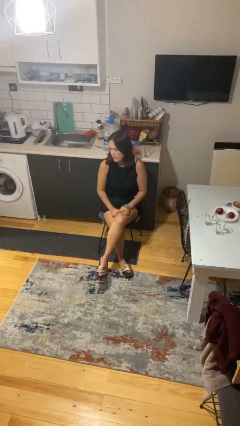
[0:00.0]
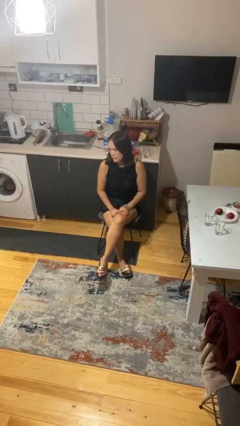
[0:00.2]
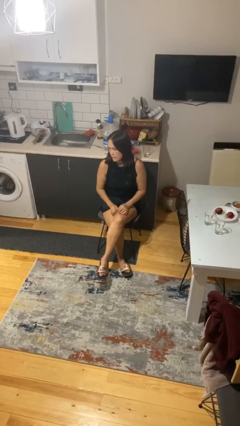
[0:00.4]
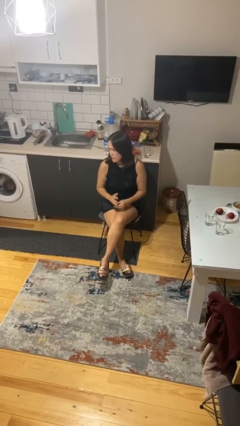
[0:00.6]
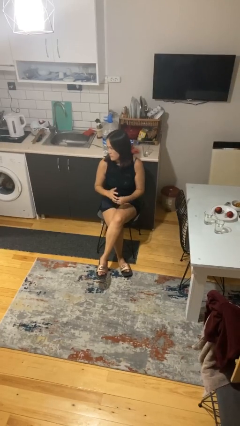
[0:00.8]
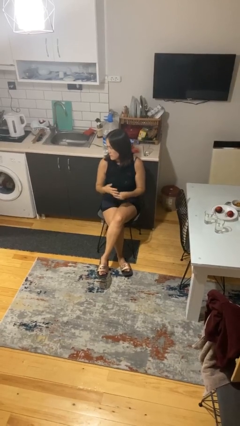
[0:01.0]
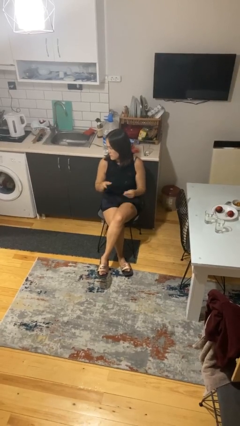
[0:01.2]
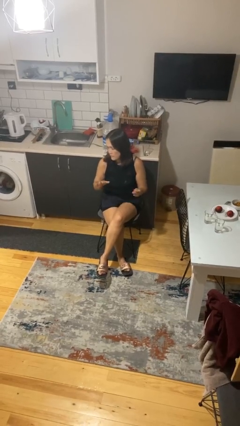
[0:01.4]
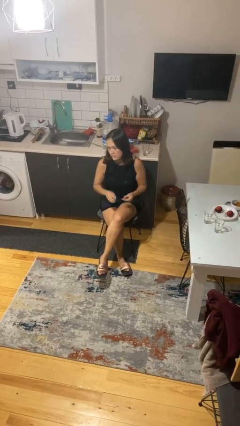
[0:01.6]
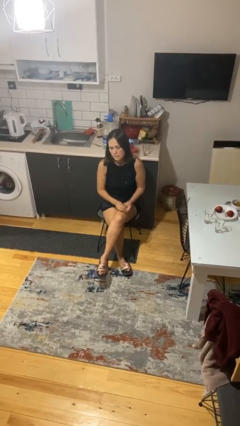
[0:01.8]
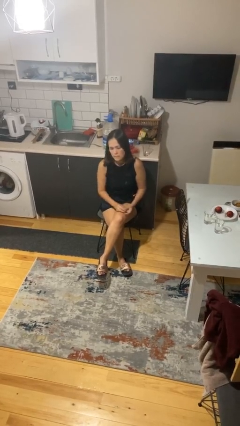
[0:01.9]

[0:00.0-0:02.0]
person takes off ring

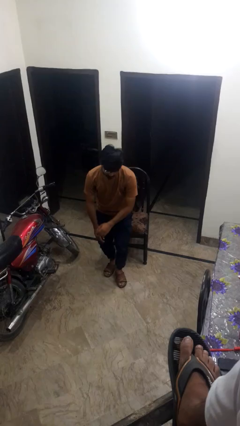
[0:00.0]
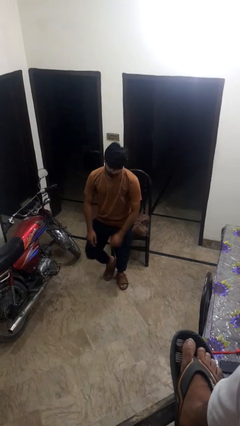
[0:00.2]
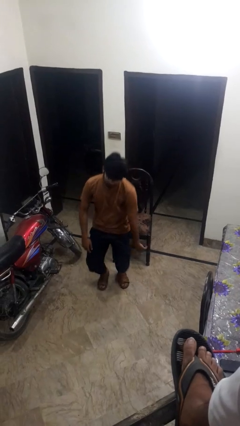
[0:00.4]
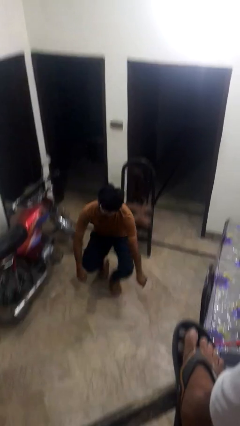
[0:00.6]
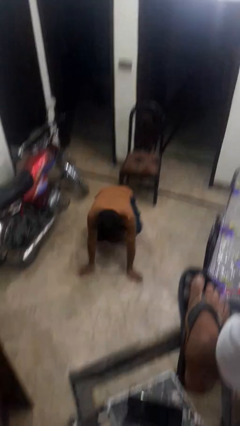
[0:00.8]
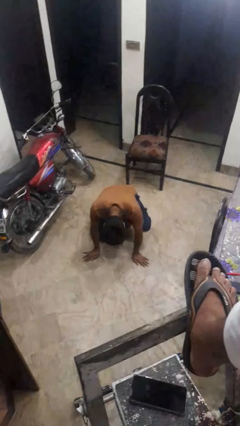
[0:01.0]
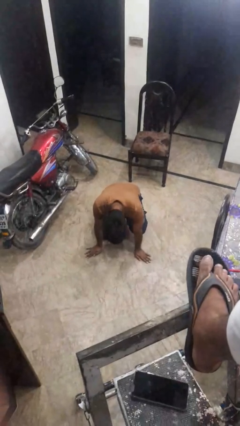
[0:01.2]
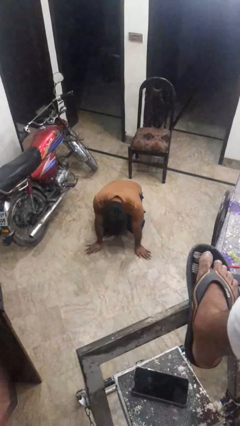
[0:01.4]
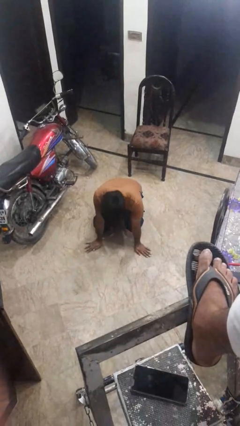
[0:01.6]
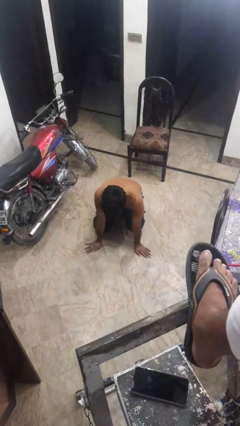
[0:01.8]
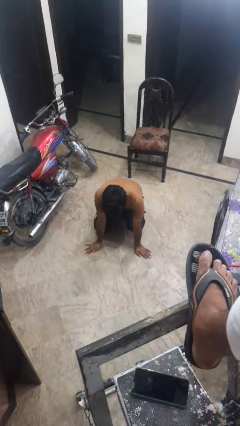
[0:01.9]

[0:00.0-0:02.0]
person falls from chair

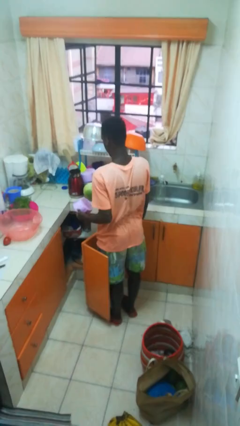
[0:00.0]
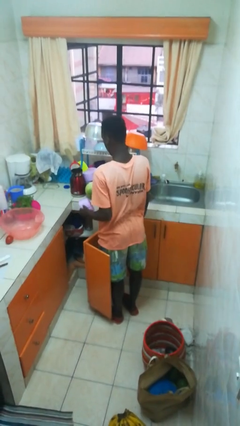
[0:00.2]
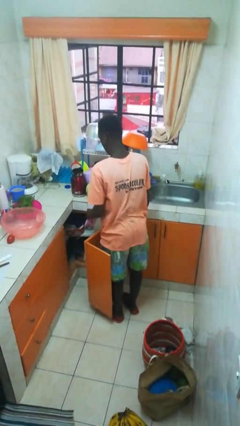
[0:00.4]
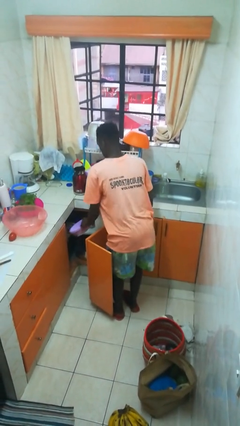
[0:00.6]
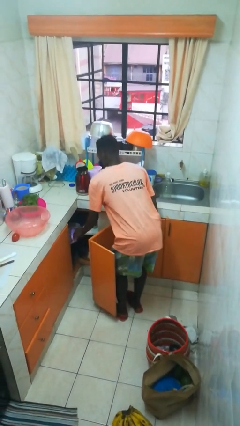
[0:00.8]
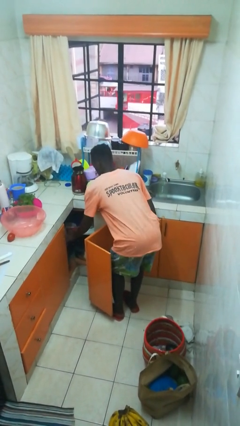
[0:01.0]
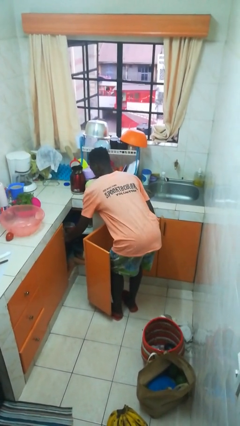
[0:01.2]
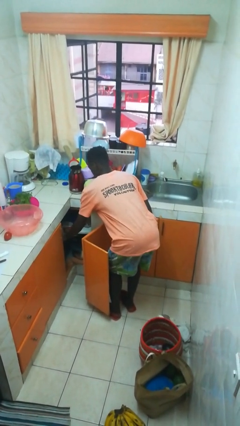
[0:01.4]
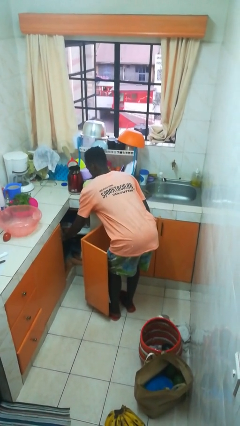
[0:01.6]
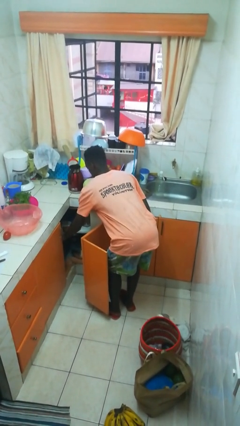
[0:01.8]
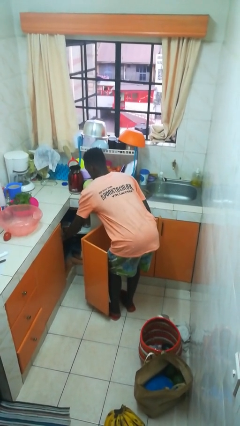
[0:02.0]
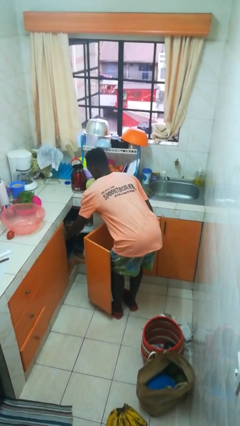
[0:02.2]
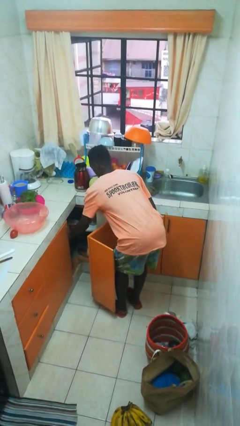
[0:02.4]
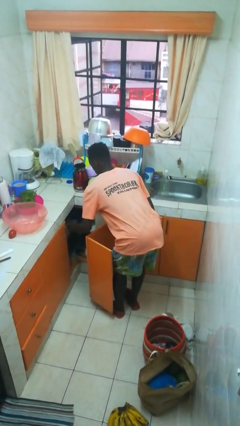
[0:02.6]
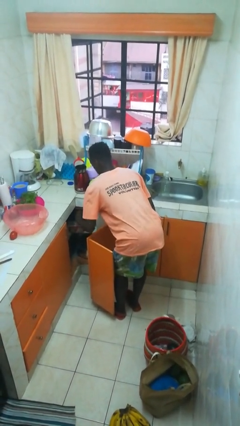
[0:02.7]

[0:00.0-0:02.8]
person puts object in cabinet

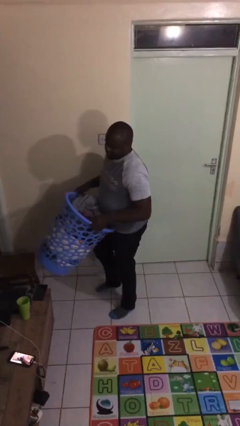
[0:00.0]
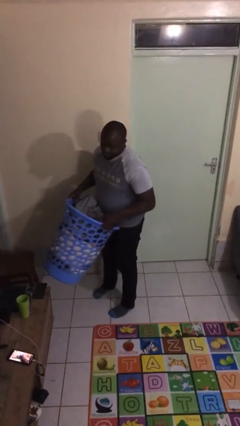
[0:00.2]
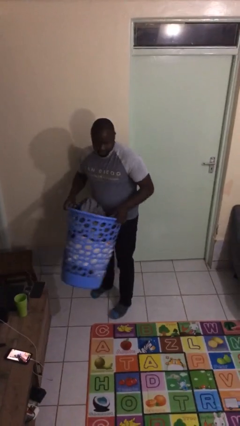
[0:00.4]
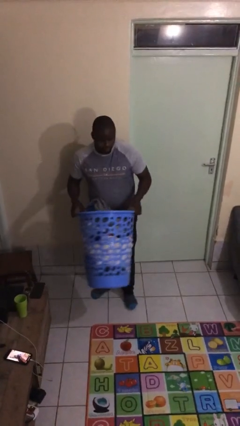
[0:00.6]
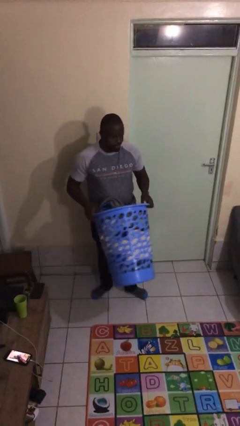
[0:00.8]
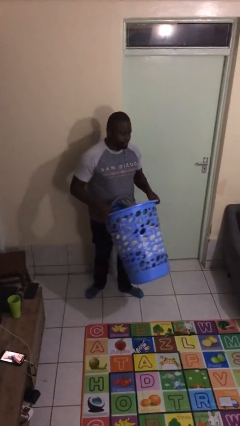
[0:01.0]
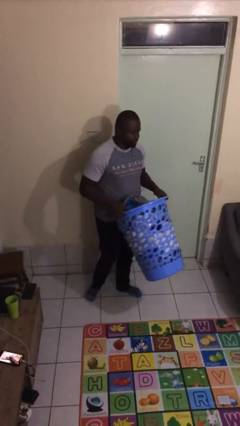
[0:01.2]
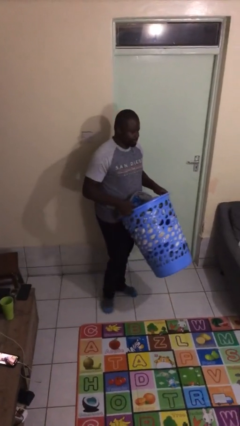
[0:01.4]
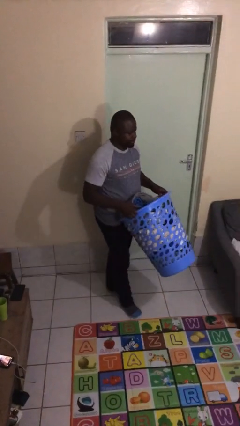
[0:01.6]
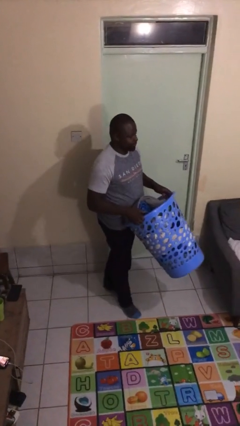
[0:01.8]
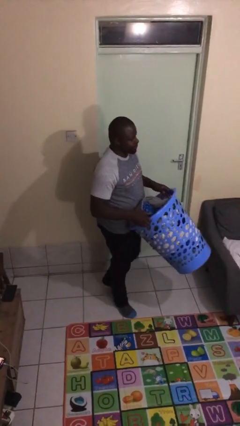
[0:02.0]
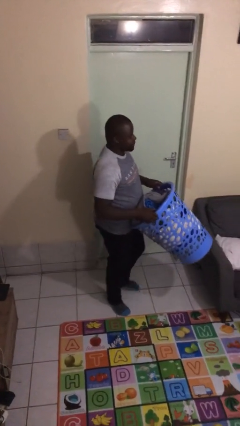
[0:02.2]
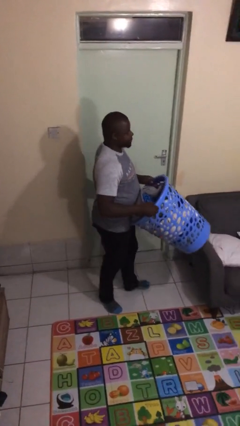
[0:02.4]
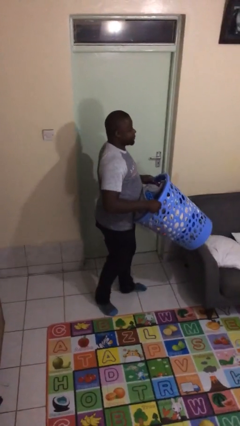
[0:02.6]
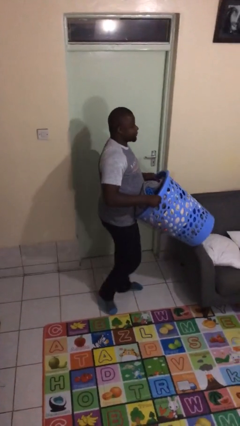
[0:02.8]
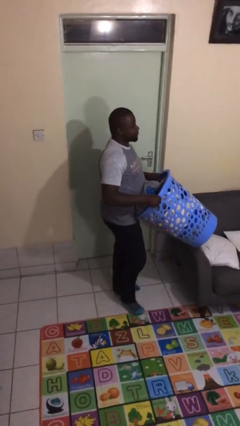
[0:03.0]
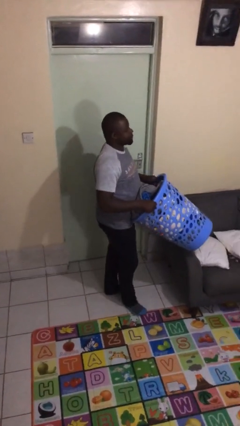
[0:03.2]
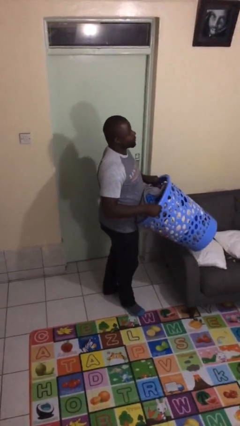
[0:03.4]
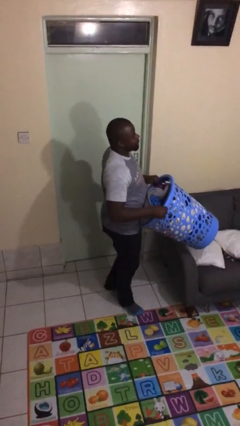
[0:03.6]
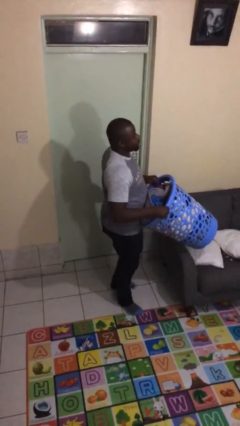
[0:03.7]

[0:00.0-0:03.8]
person carries laundry basket

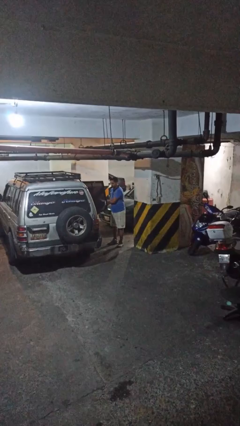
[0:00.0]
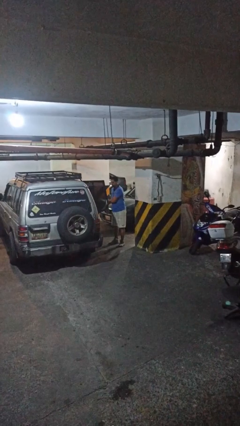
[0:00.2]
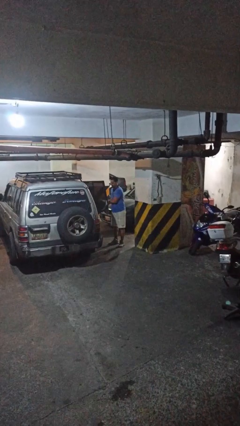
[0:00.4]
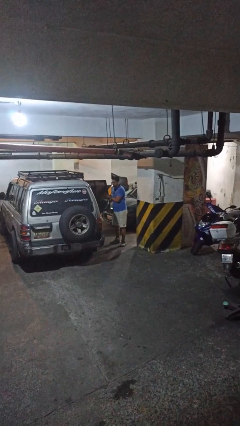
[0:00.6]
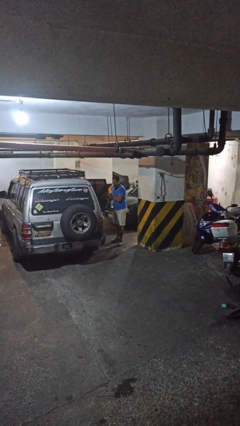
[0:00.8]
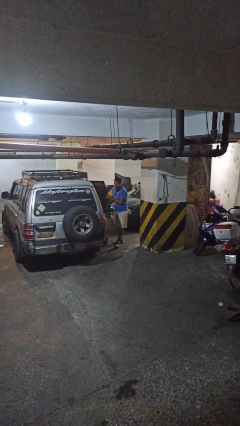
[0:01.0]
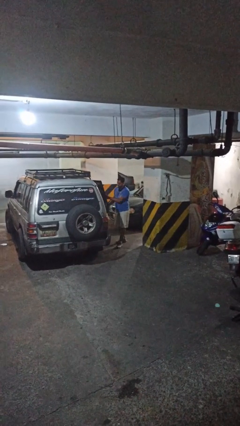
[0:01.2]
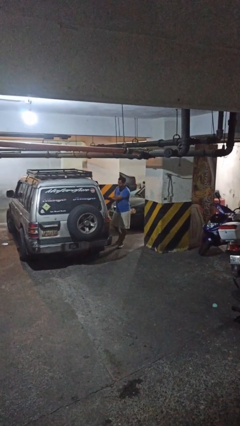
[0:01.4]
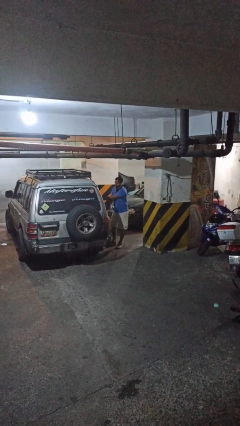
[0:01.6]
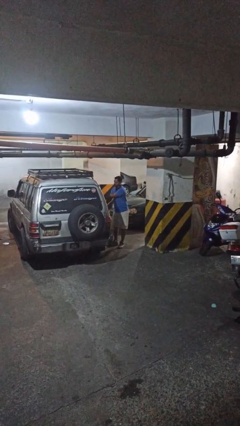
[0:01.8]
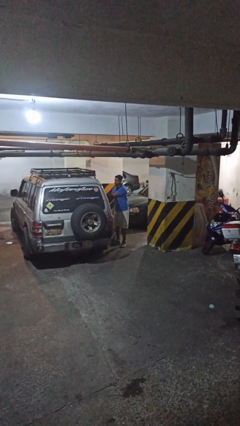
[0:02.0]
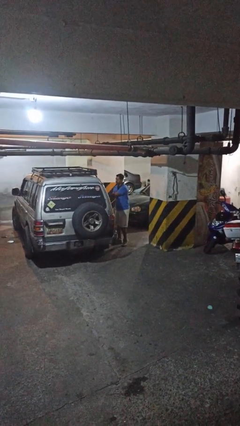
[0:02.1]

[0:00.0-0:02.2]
person closes car door

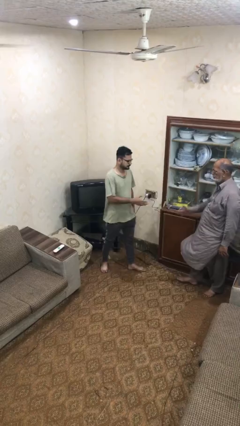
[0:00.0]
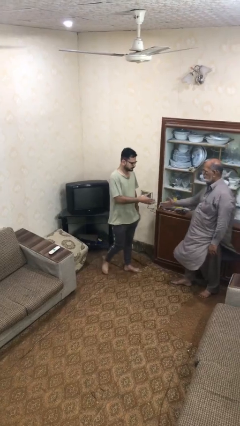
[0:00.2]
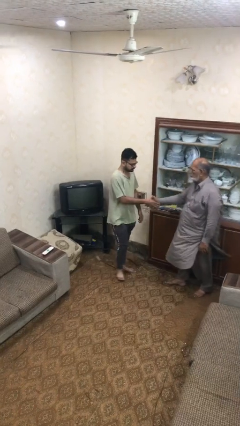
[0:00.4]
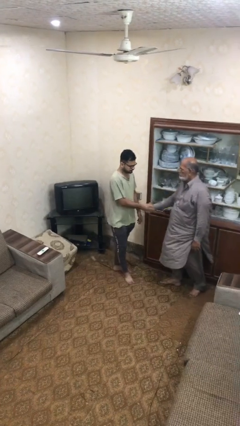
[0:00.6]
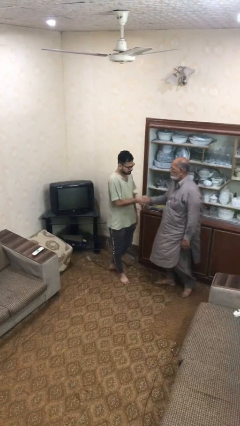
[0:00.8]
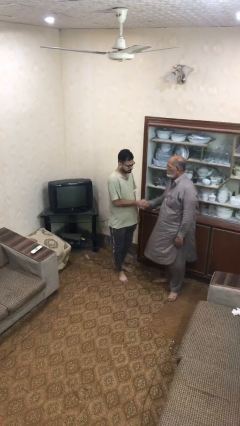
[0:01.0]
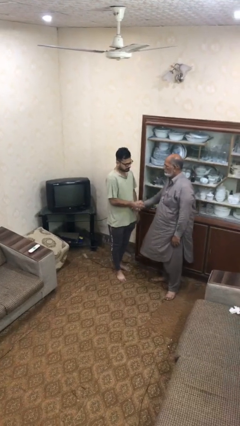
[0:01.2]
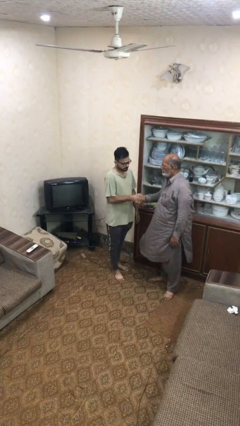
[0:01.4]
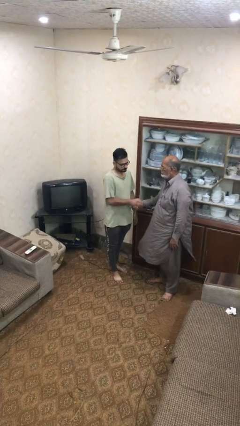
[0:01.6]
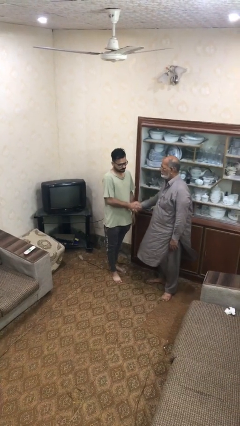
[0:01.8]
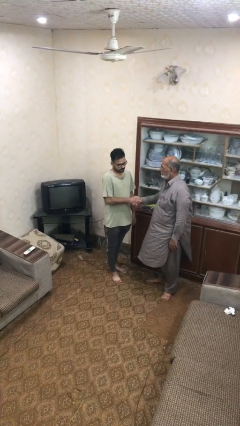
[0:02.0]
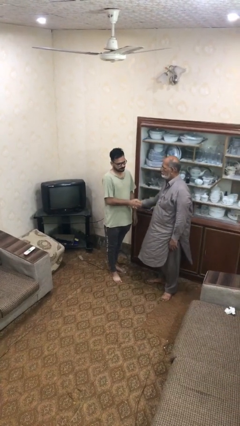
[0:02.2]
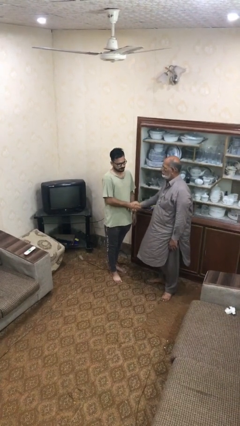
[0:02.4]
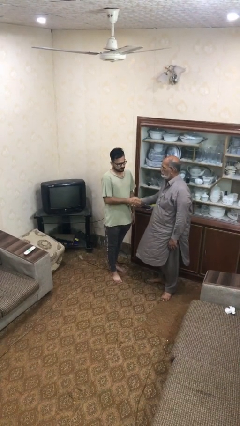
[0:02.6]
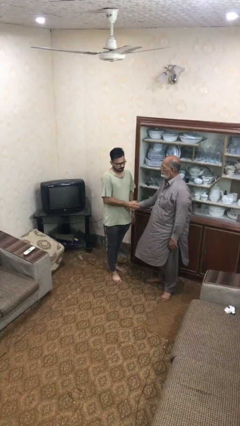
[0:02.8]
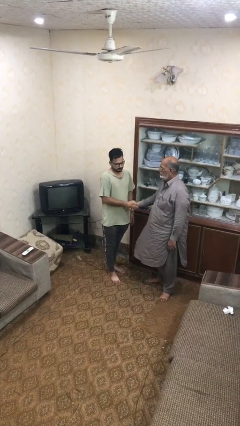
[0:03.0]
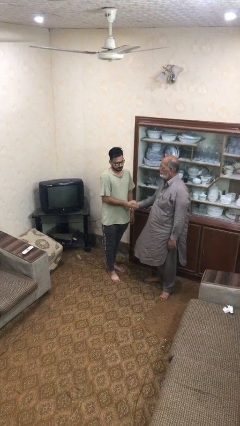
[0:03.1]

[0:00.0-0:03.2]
person shakes hand

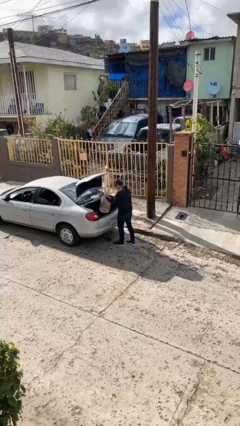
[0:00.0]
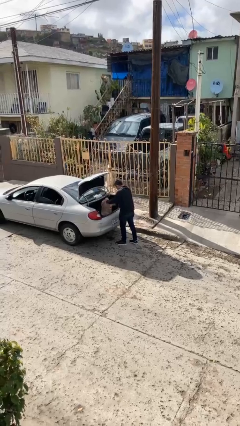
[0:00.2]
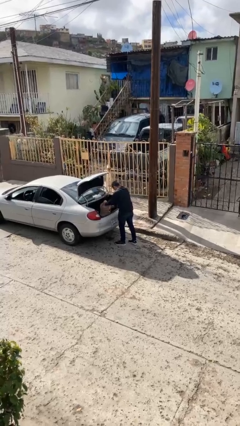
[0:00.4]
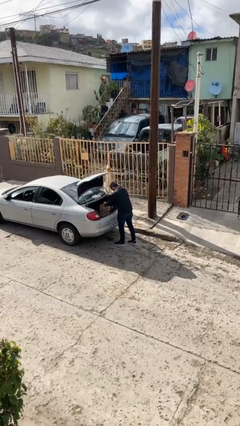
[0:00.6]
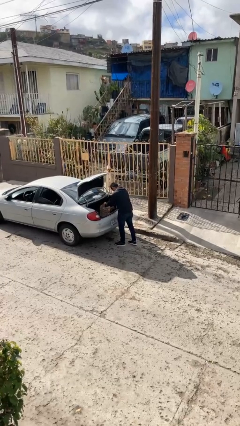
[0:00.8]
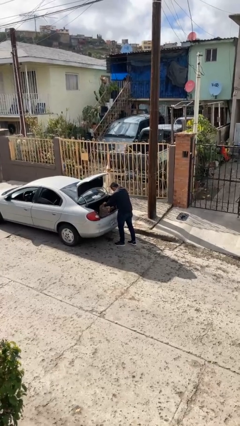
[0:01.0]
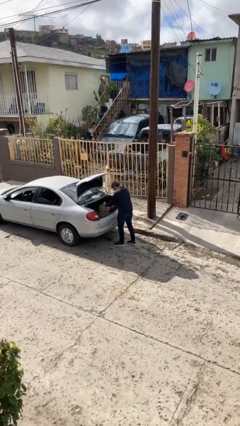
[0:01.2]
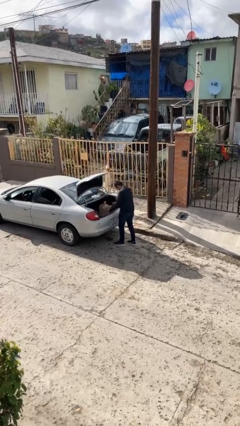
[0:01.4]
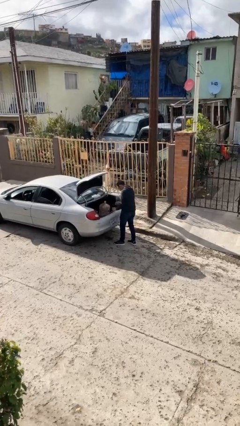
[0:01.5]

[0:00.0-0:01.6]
person loads car
